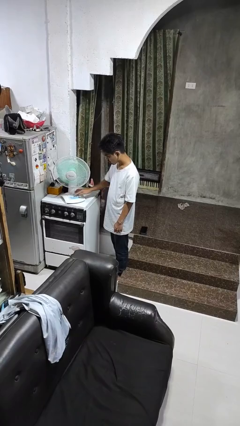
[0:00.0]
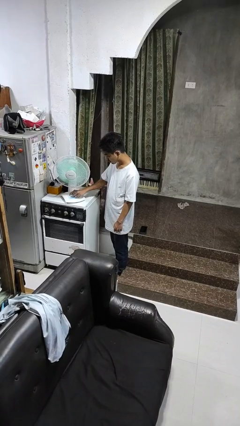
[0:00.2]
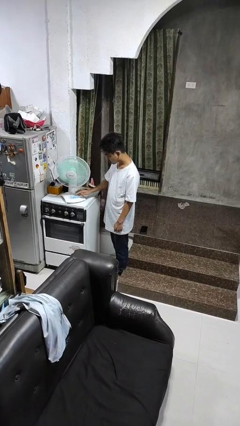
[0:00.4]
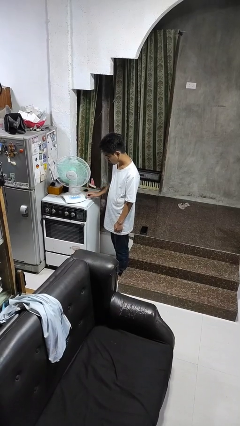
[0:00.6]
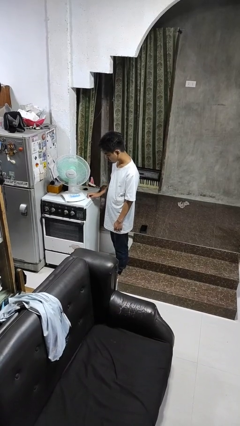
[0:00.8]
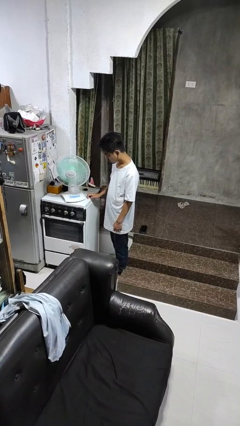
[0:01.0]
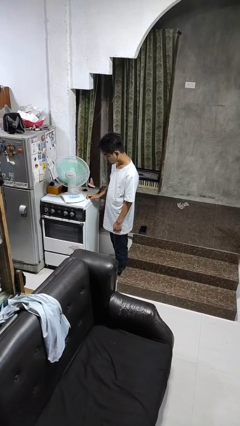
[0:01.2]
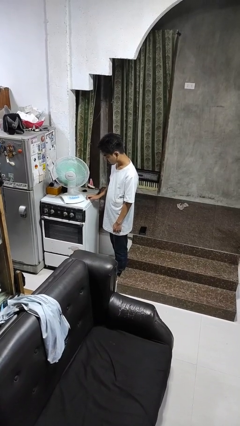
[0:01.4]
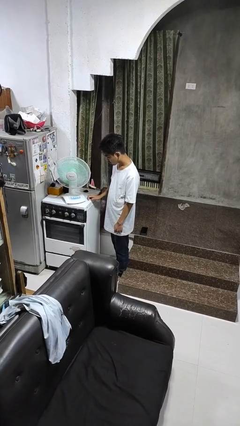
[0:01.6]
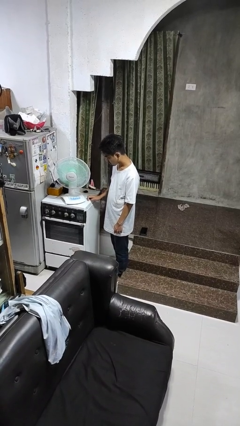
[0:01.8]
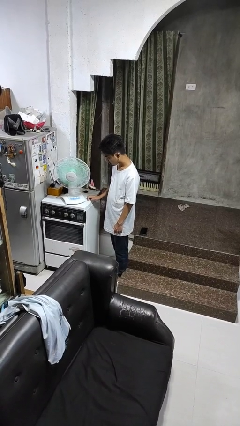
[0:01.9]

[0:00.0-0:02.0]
person turns off fan

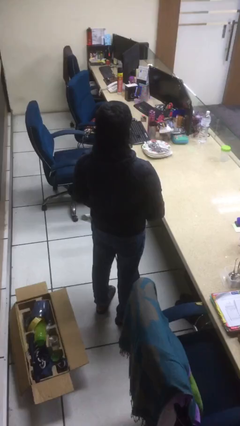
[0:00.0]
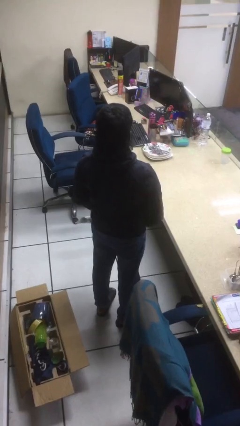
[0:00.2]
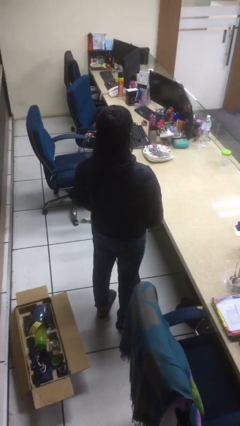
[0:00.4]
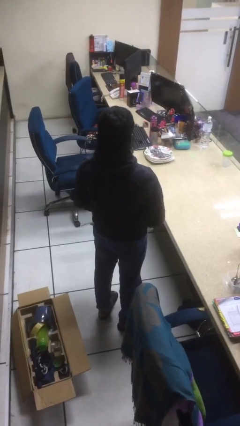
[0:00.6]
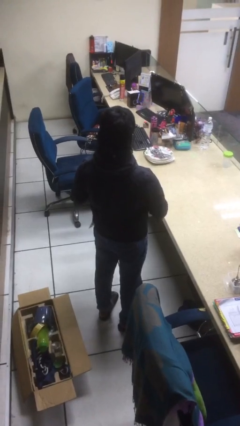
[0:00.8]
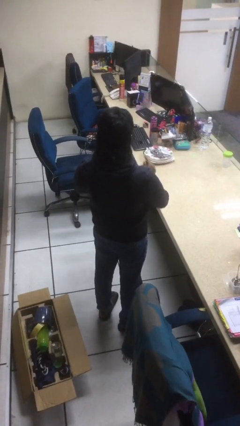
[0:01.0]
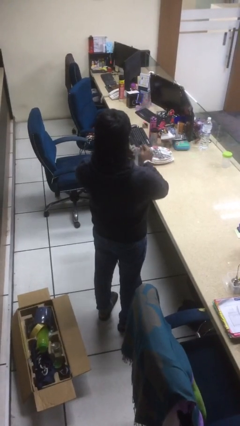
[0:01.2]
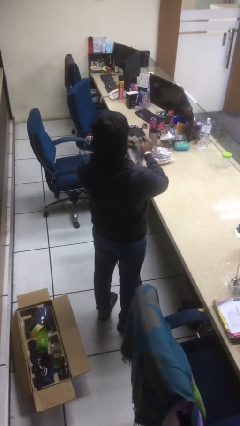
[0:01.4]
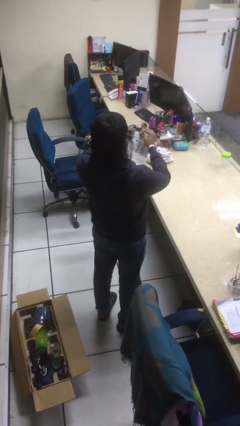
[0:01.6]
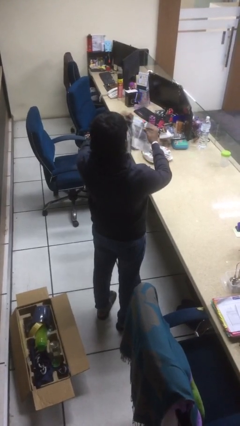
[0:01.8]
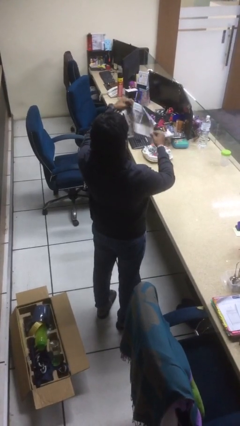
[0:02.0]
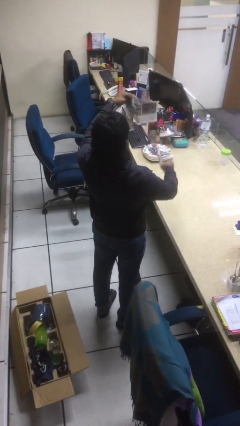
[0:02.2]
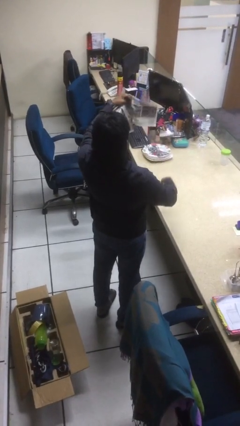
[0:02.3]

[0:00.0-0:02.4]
person tears paper

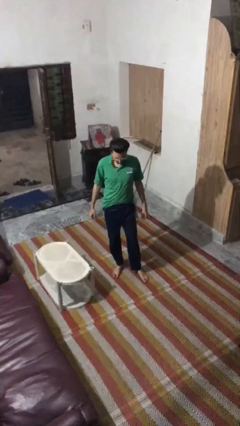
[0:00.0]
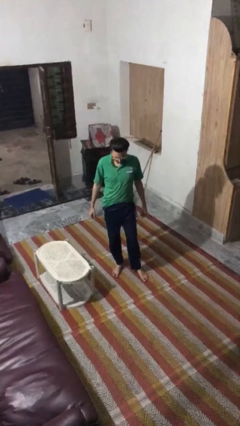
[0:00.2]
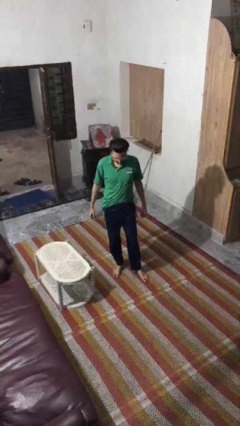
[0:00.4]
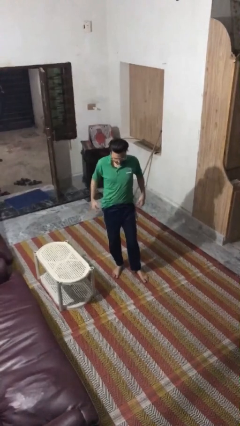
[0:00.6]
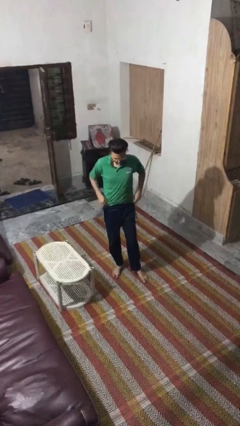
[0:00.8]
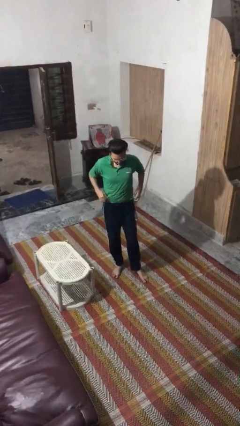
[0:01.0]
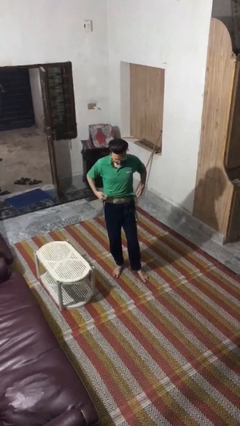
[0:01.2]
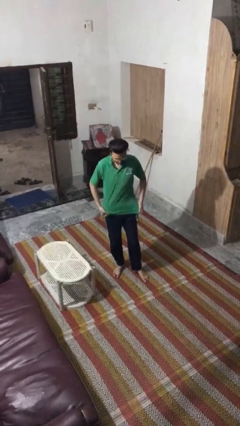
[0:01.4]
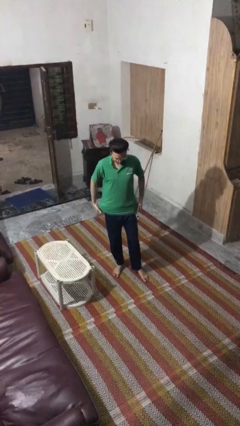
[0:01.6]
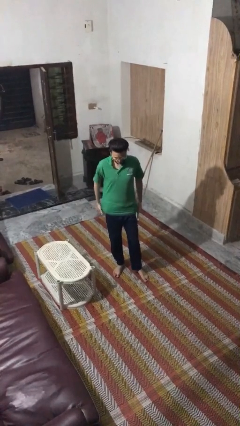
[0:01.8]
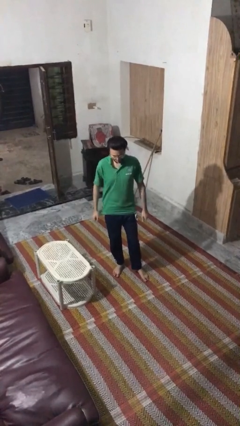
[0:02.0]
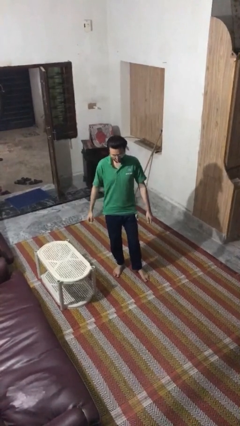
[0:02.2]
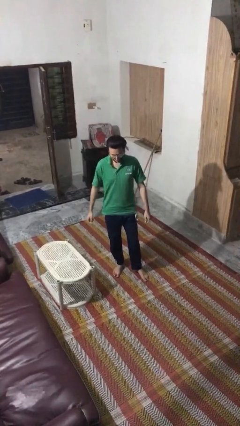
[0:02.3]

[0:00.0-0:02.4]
person untucks shirt

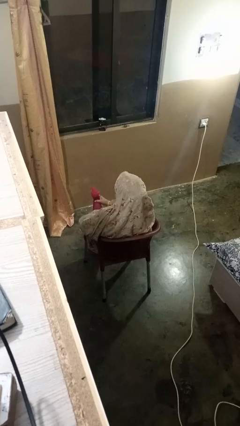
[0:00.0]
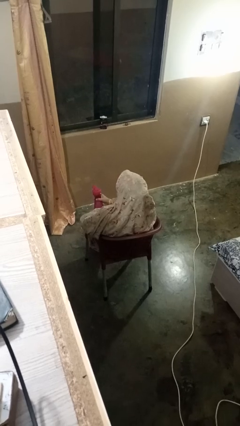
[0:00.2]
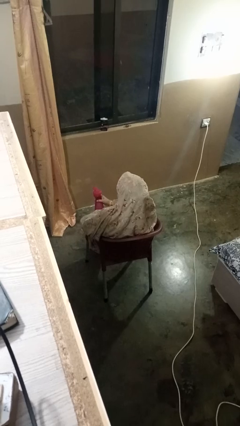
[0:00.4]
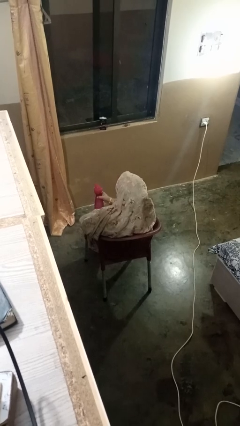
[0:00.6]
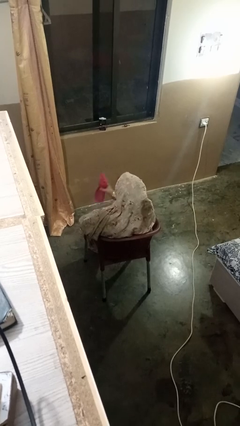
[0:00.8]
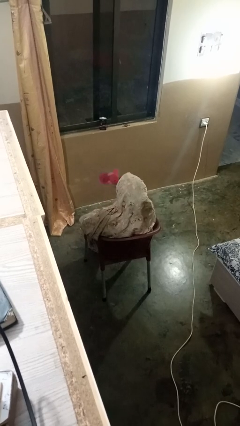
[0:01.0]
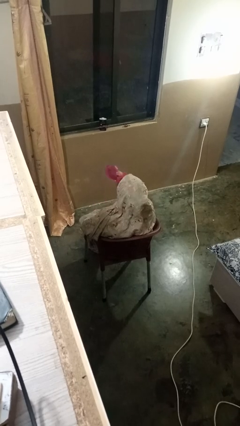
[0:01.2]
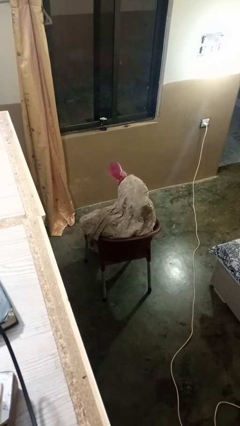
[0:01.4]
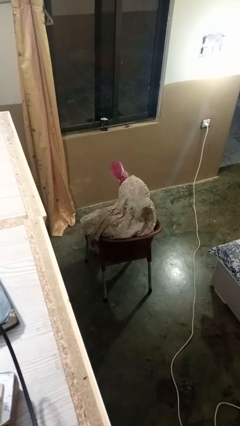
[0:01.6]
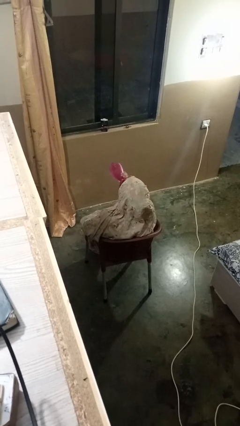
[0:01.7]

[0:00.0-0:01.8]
person drinks from bottle

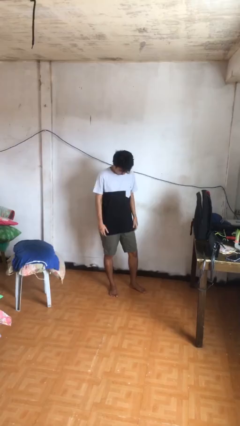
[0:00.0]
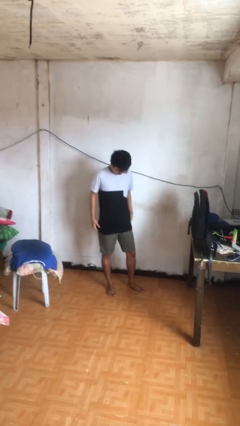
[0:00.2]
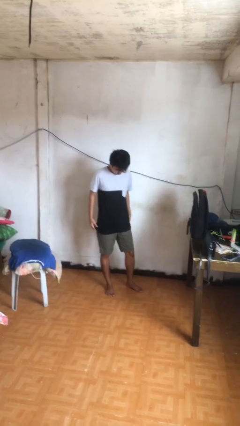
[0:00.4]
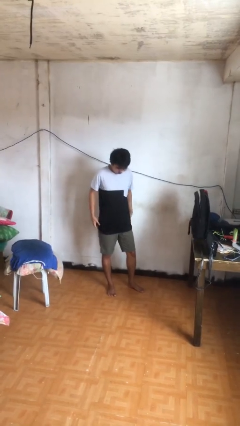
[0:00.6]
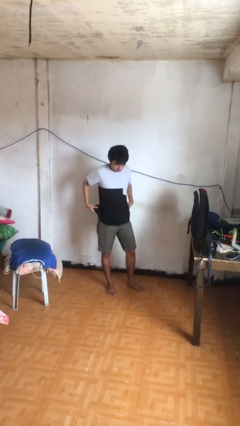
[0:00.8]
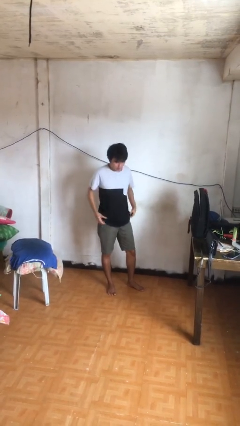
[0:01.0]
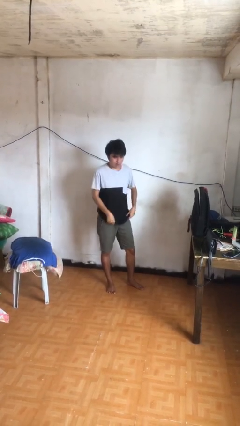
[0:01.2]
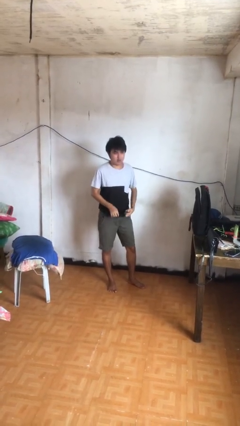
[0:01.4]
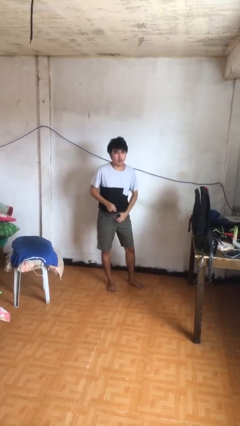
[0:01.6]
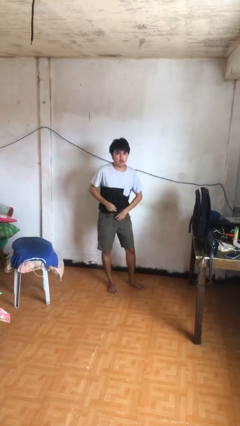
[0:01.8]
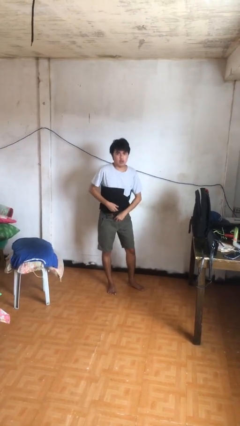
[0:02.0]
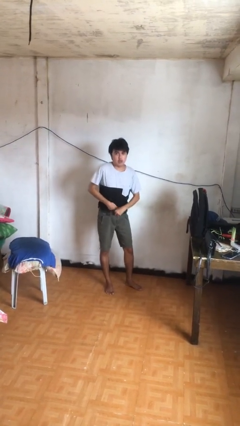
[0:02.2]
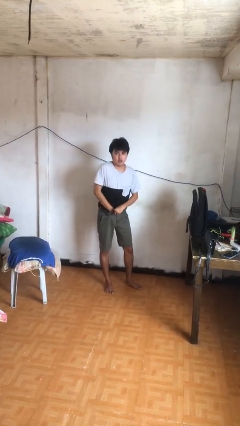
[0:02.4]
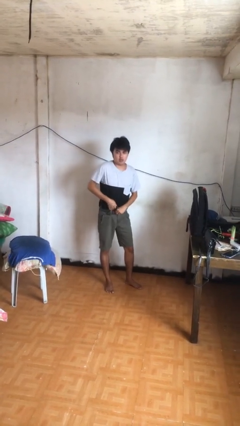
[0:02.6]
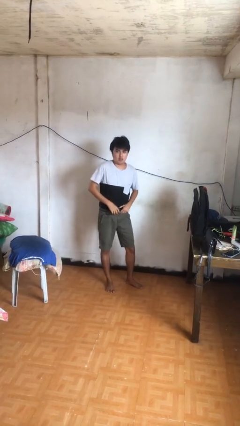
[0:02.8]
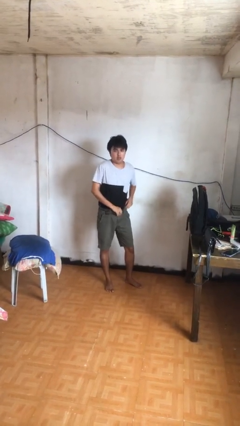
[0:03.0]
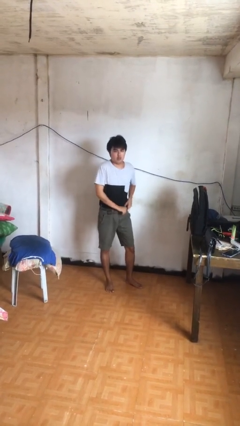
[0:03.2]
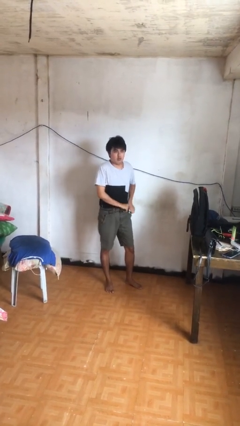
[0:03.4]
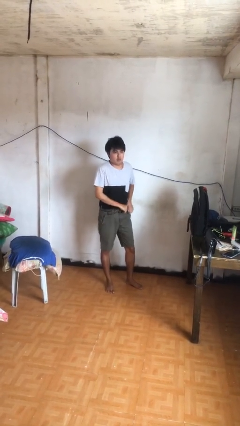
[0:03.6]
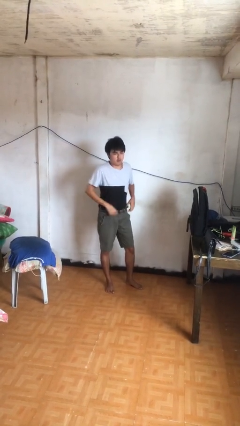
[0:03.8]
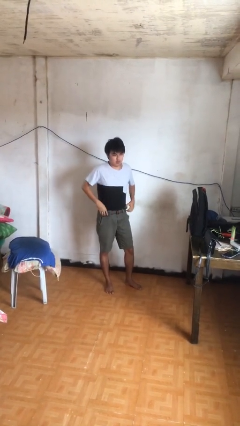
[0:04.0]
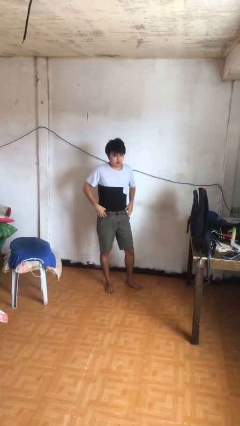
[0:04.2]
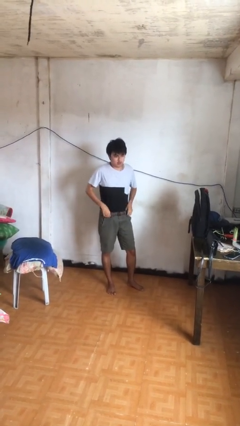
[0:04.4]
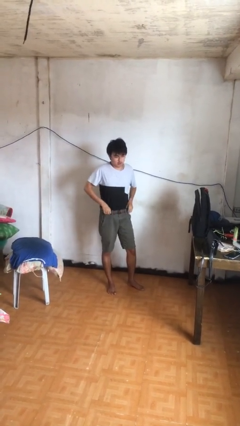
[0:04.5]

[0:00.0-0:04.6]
person tucks in shirt

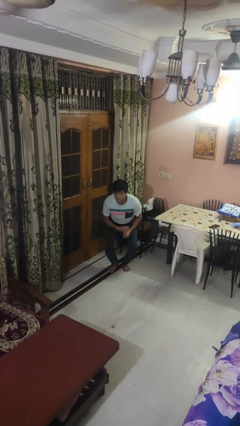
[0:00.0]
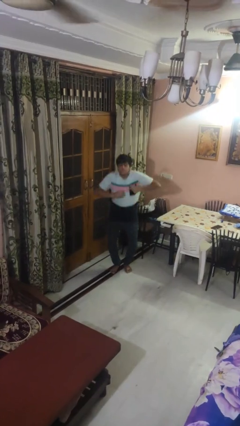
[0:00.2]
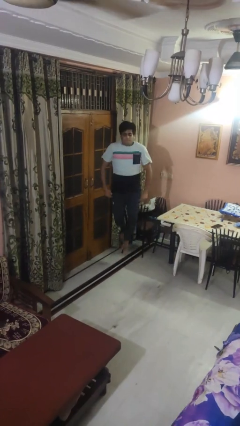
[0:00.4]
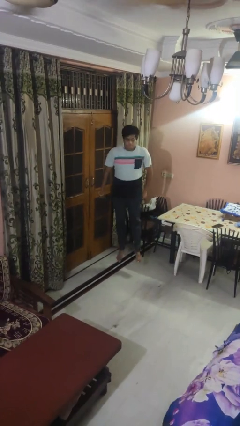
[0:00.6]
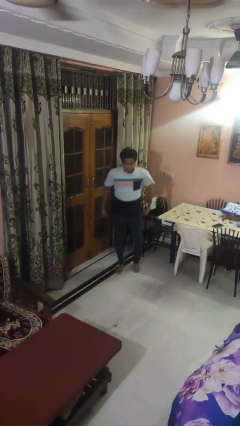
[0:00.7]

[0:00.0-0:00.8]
person jumps

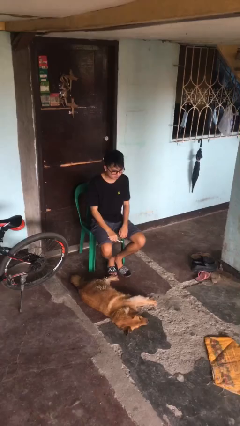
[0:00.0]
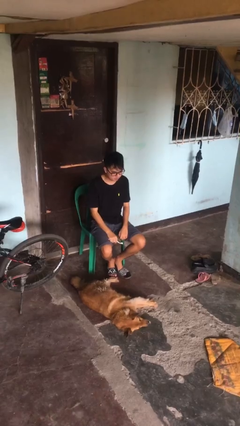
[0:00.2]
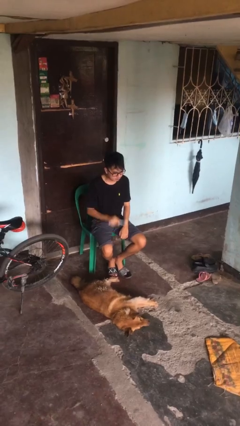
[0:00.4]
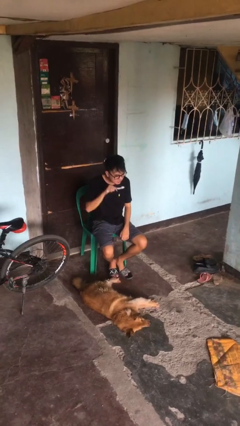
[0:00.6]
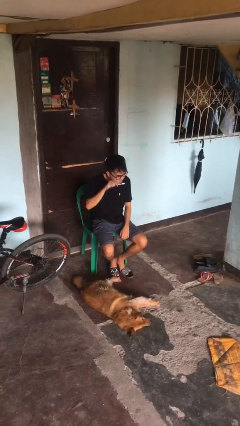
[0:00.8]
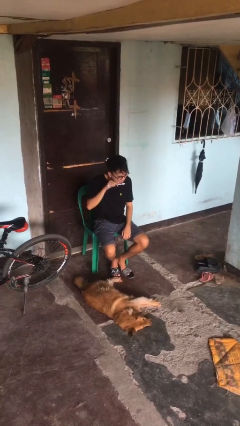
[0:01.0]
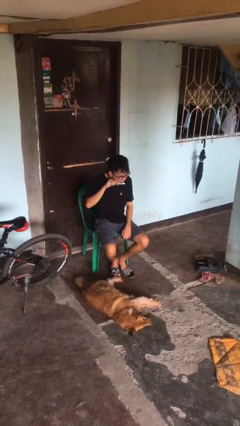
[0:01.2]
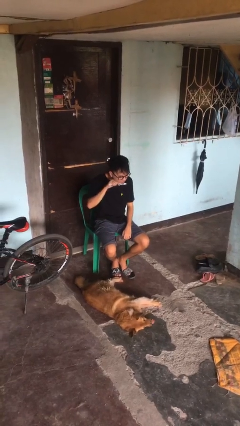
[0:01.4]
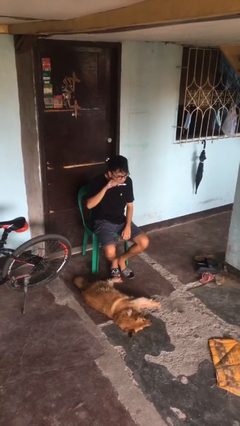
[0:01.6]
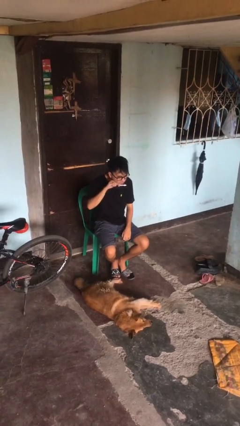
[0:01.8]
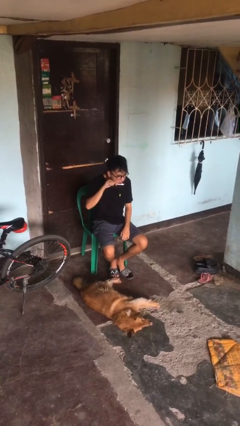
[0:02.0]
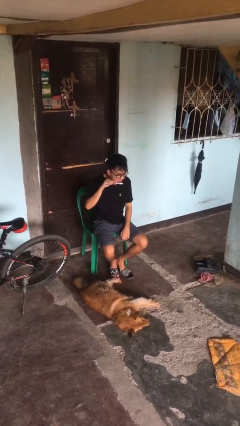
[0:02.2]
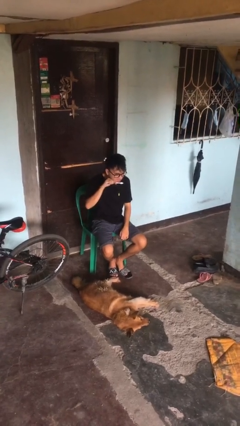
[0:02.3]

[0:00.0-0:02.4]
person brushes teeth

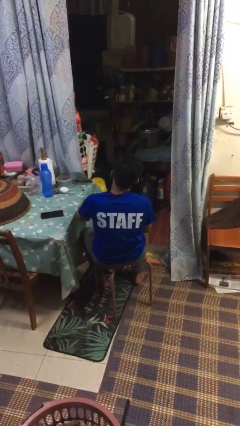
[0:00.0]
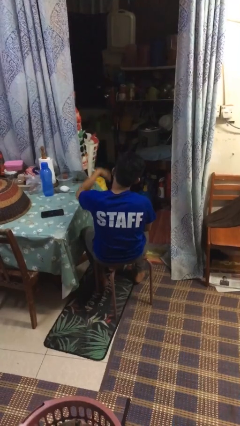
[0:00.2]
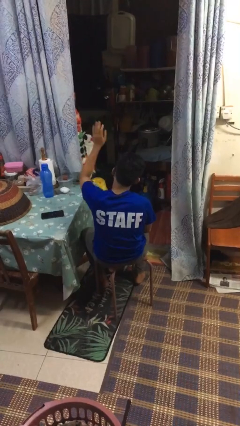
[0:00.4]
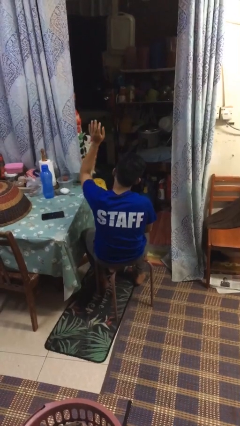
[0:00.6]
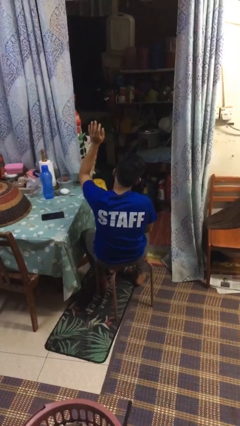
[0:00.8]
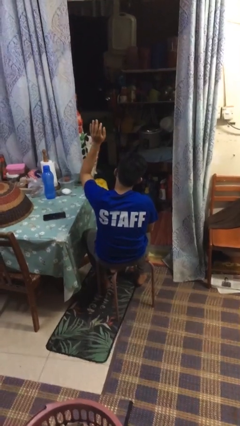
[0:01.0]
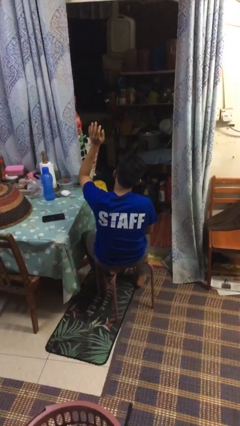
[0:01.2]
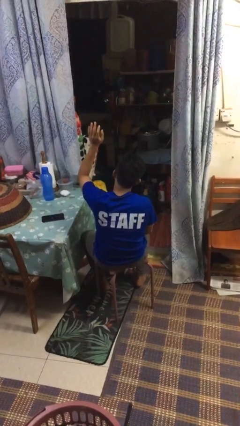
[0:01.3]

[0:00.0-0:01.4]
person gestures swipe up
